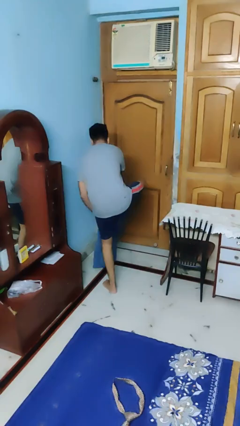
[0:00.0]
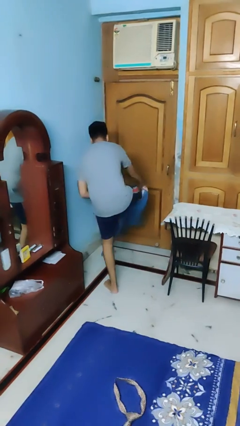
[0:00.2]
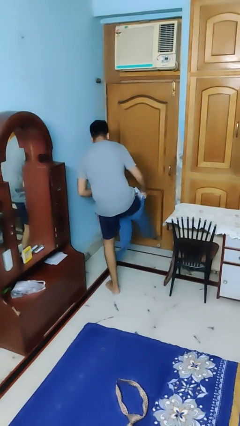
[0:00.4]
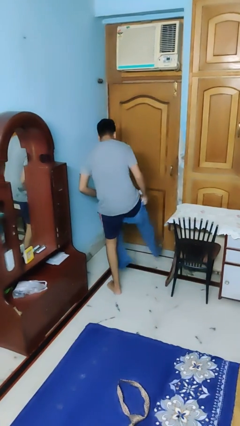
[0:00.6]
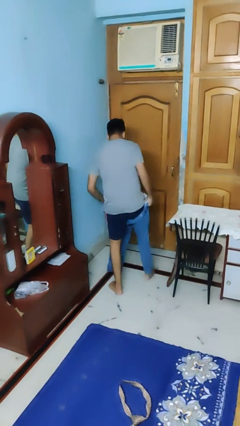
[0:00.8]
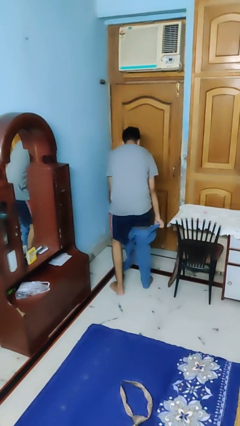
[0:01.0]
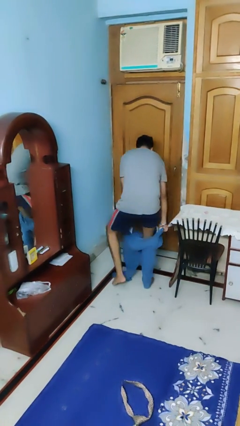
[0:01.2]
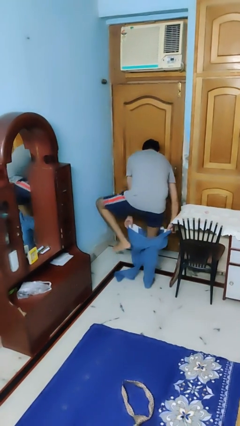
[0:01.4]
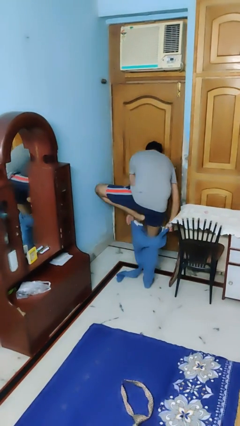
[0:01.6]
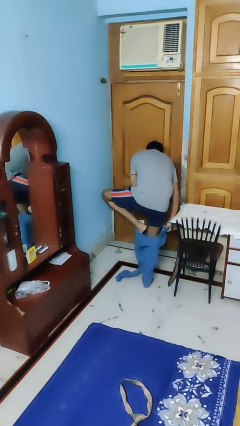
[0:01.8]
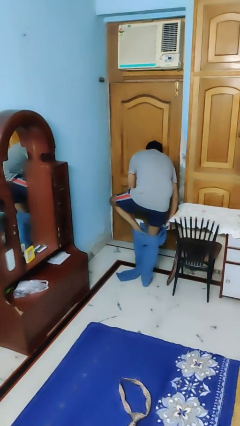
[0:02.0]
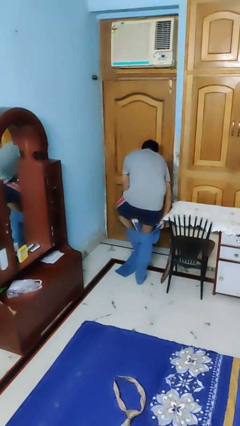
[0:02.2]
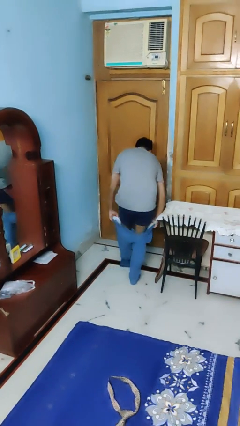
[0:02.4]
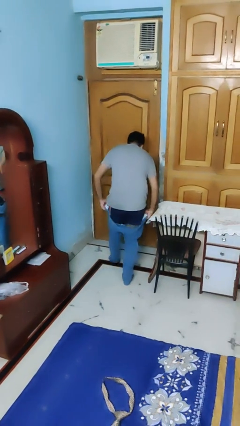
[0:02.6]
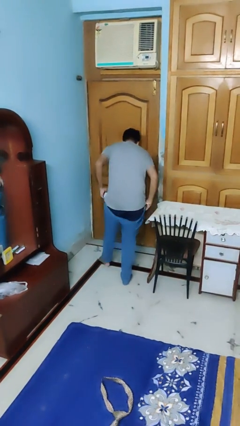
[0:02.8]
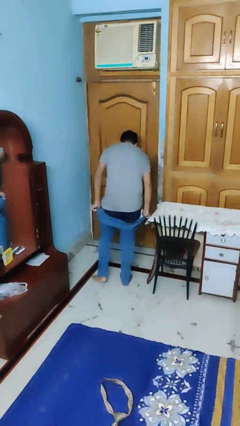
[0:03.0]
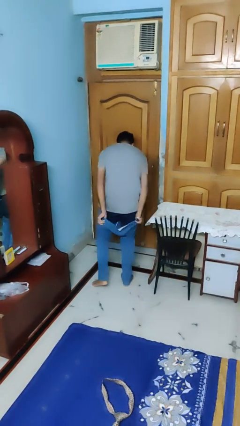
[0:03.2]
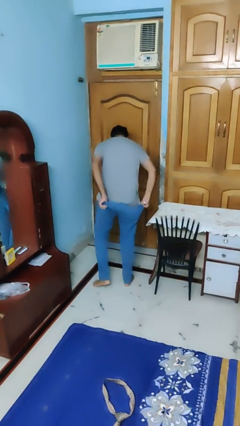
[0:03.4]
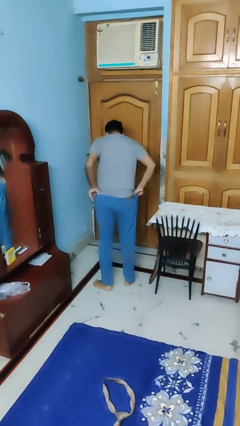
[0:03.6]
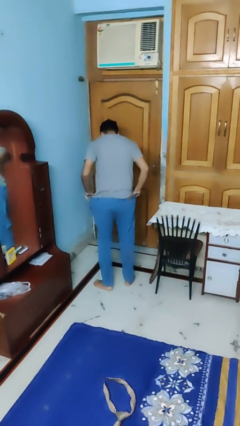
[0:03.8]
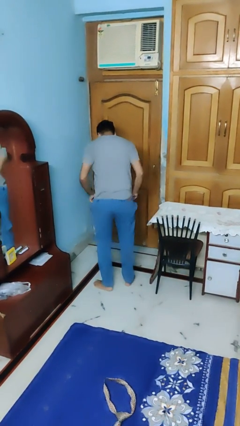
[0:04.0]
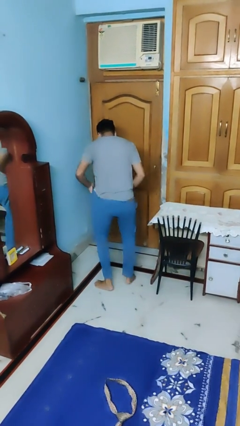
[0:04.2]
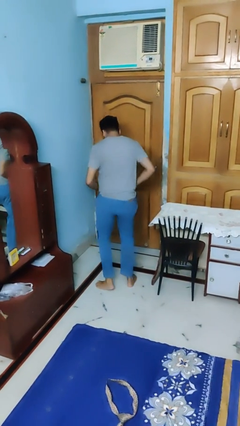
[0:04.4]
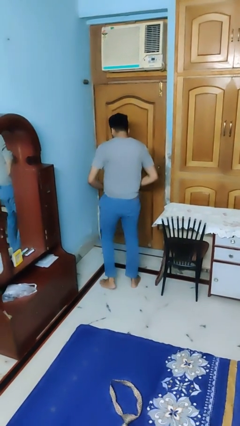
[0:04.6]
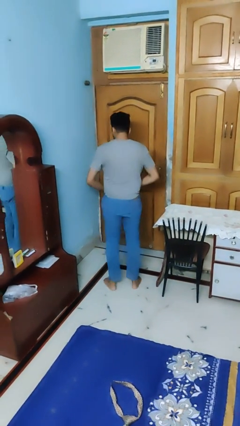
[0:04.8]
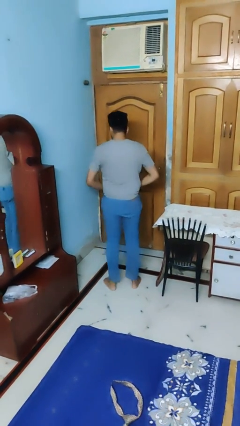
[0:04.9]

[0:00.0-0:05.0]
person puts on pants

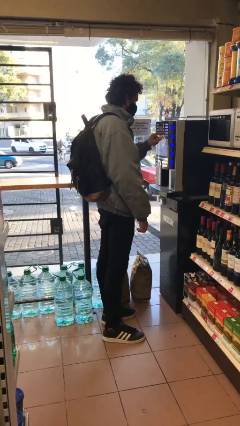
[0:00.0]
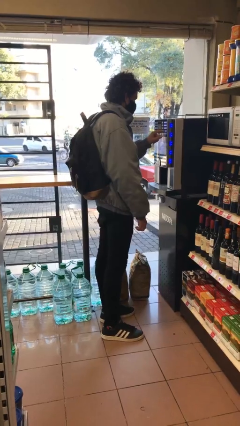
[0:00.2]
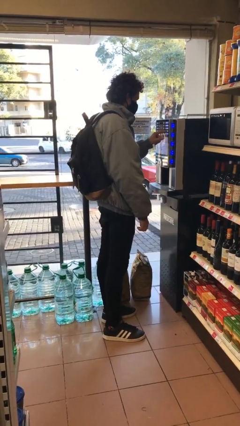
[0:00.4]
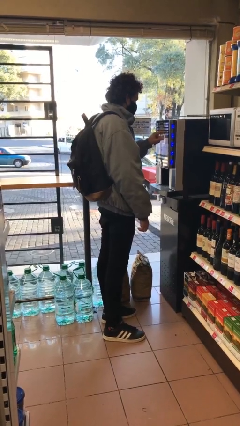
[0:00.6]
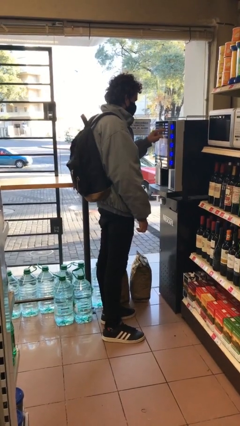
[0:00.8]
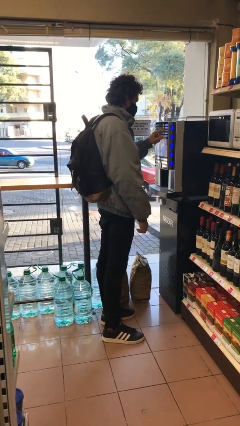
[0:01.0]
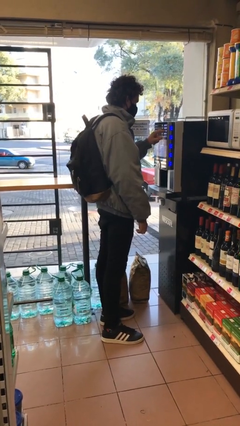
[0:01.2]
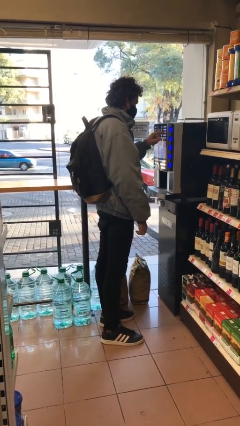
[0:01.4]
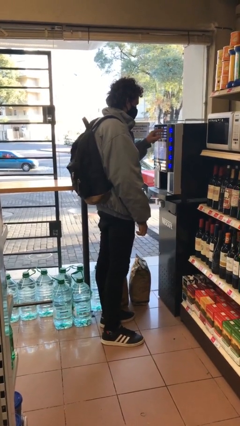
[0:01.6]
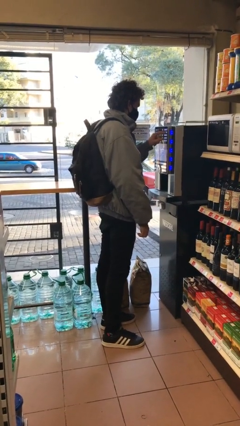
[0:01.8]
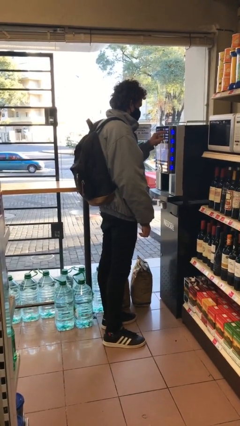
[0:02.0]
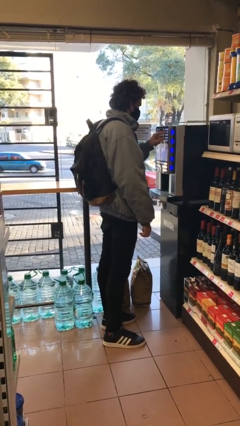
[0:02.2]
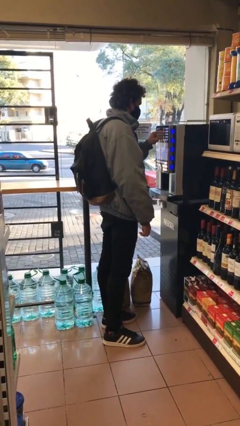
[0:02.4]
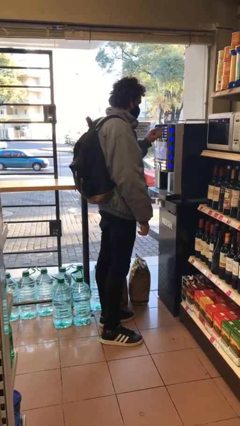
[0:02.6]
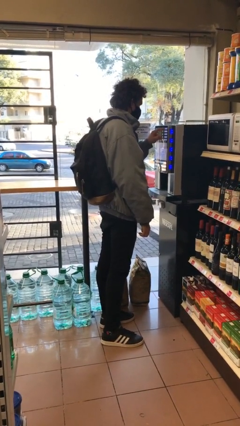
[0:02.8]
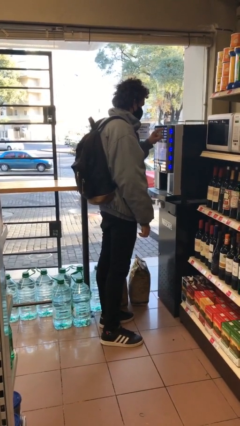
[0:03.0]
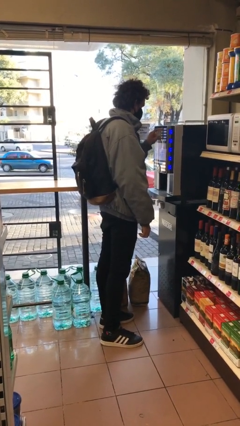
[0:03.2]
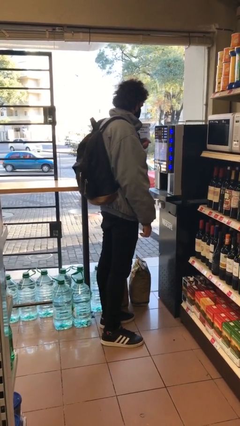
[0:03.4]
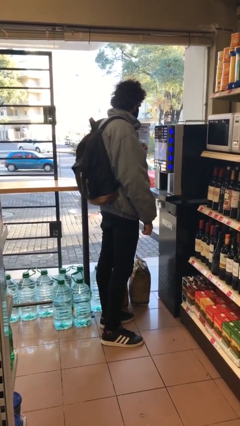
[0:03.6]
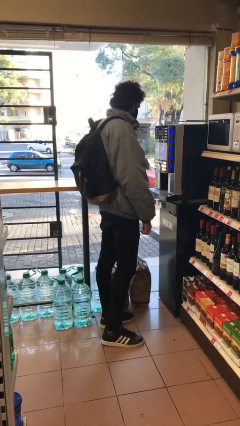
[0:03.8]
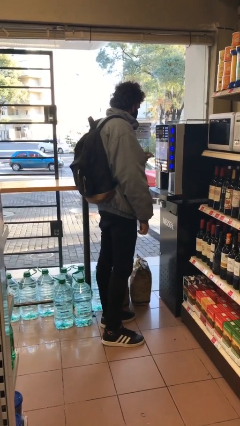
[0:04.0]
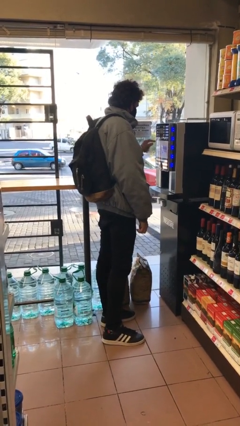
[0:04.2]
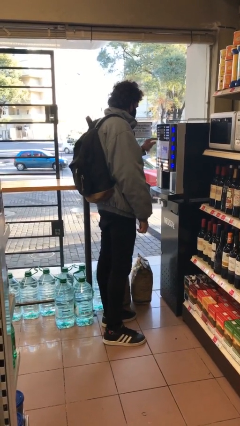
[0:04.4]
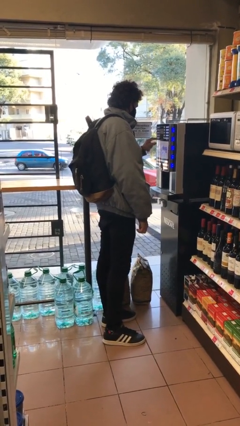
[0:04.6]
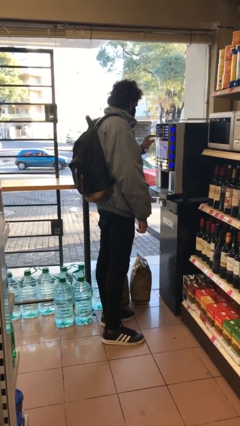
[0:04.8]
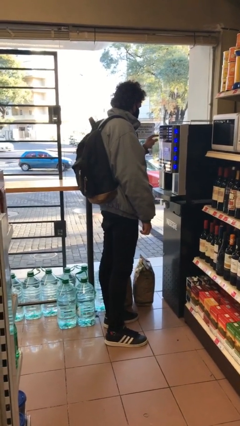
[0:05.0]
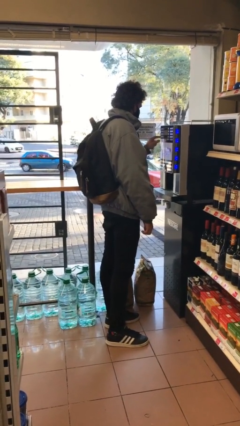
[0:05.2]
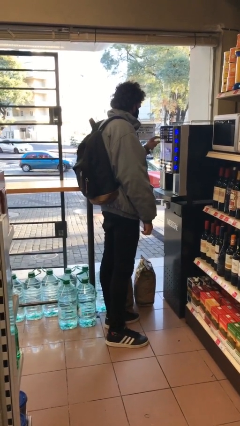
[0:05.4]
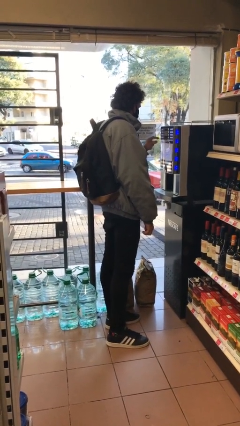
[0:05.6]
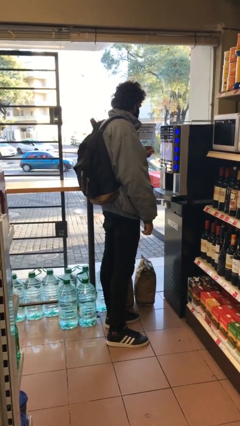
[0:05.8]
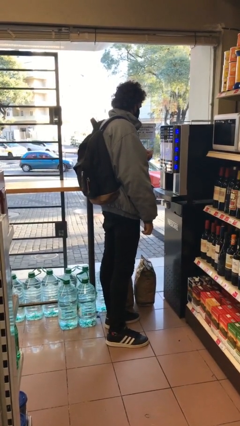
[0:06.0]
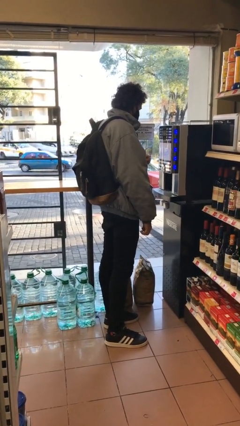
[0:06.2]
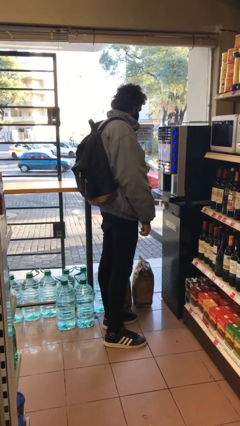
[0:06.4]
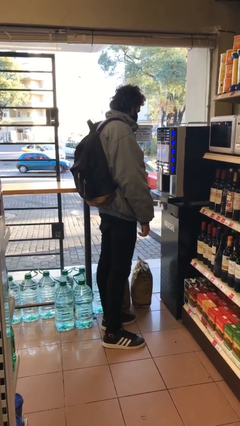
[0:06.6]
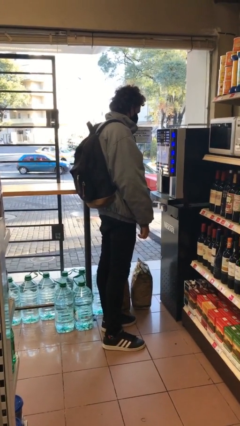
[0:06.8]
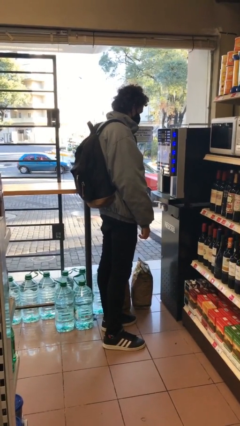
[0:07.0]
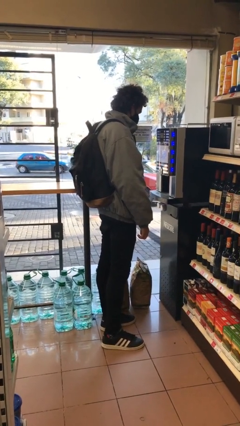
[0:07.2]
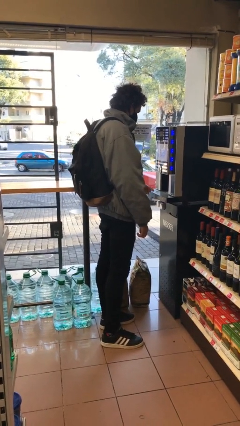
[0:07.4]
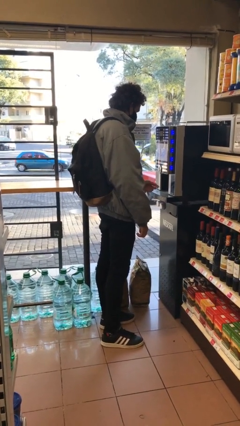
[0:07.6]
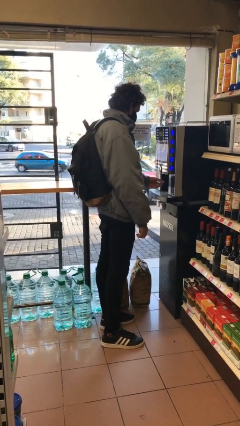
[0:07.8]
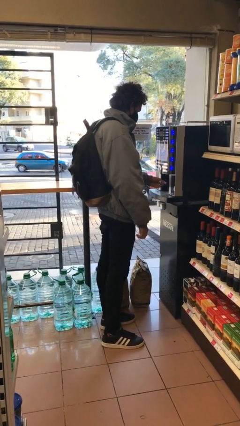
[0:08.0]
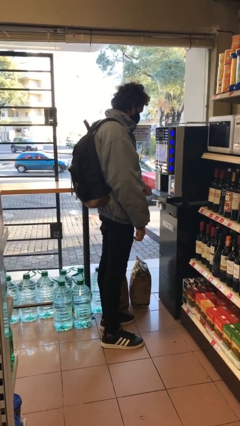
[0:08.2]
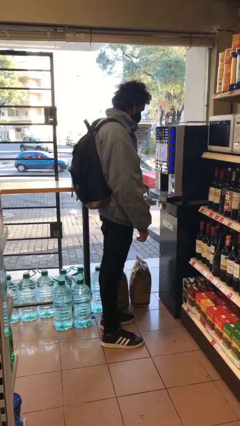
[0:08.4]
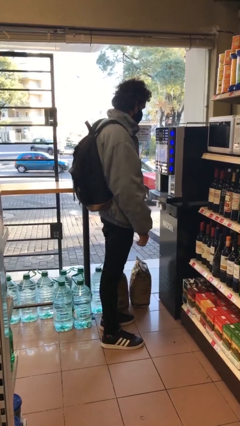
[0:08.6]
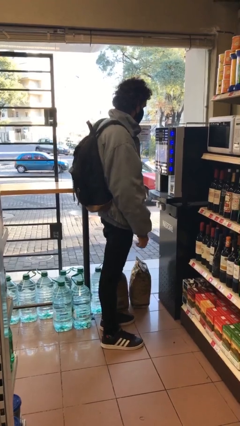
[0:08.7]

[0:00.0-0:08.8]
person purchases from machine

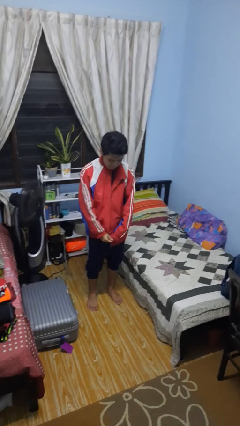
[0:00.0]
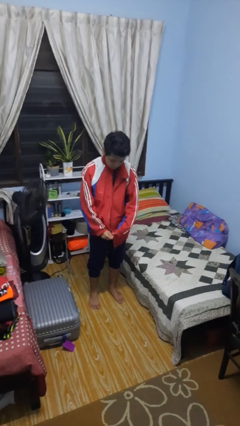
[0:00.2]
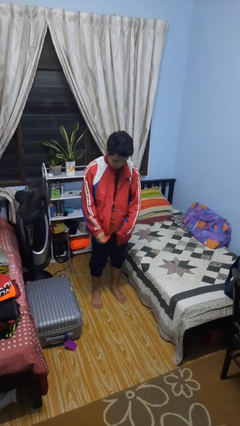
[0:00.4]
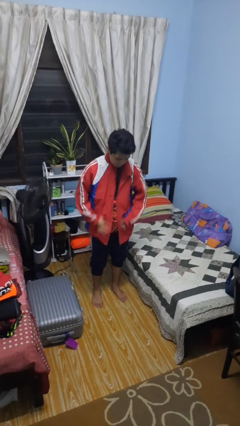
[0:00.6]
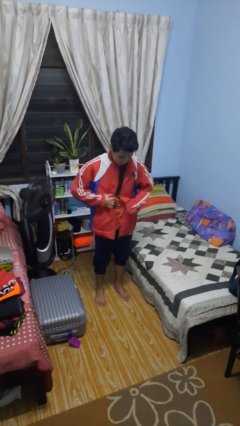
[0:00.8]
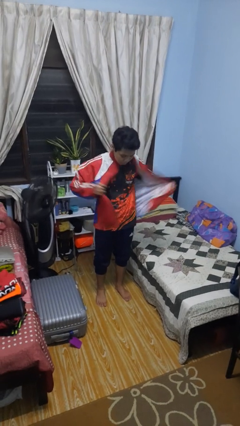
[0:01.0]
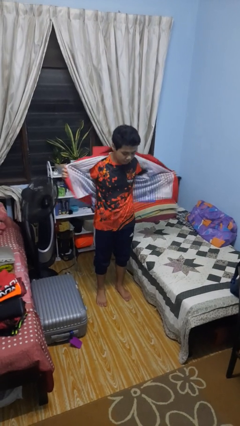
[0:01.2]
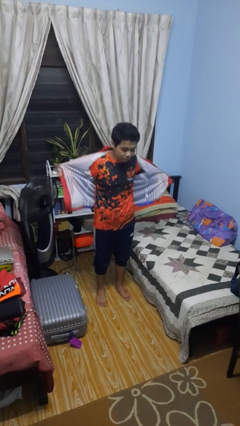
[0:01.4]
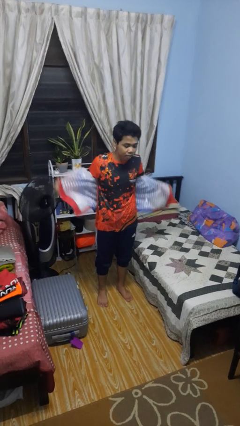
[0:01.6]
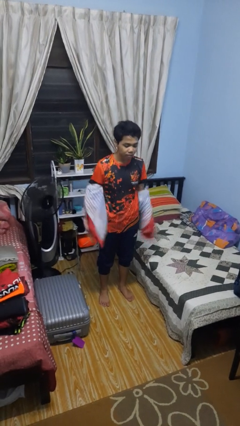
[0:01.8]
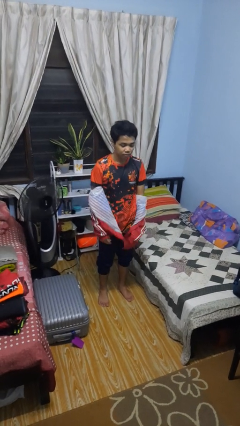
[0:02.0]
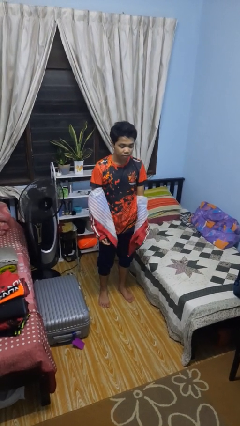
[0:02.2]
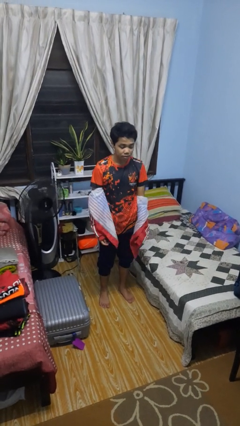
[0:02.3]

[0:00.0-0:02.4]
person takes off jacket

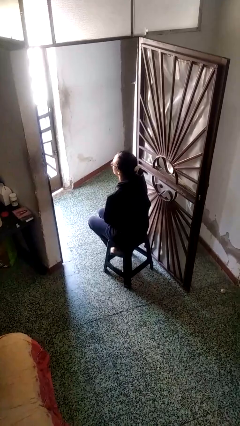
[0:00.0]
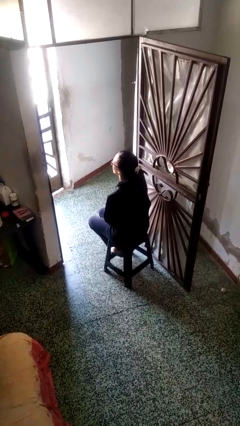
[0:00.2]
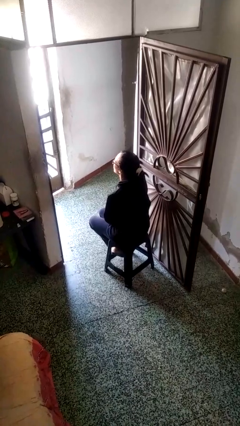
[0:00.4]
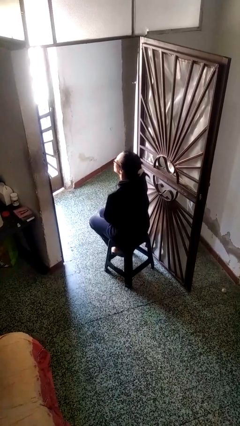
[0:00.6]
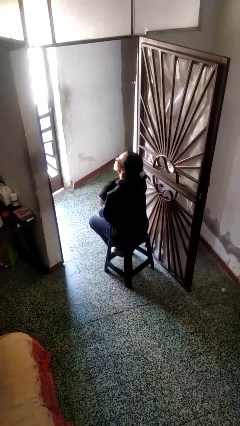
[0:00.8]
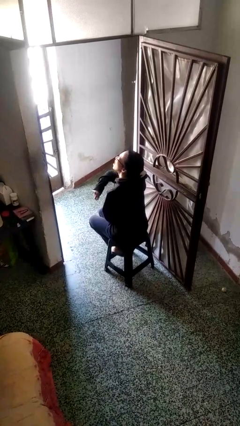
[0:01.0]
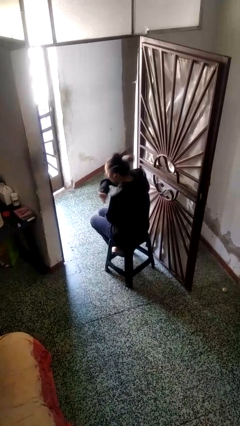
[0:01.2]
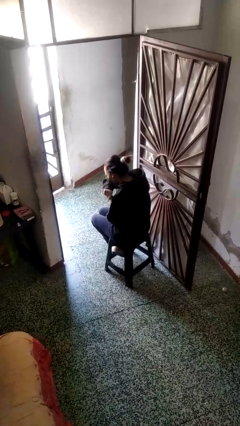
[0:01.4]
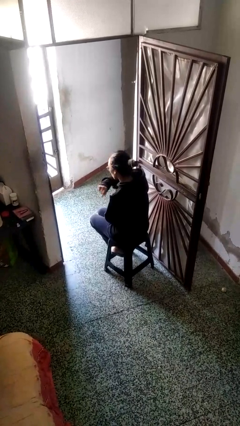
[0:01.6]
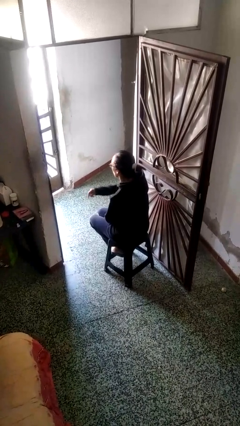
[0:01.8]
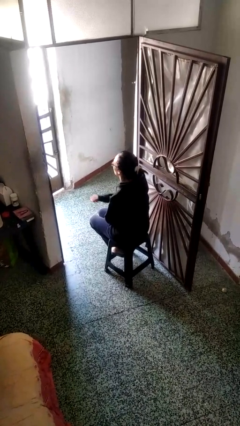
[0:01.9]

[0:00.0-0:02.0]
person sneezes into arm
